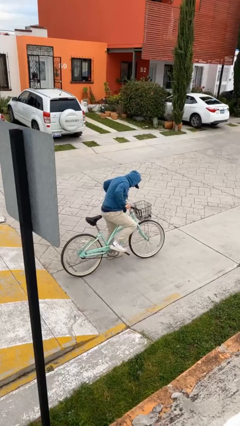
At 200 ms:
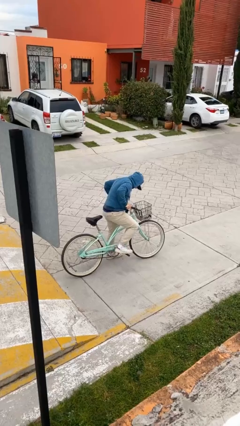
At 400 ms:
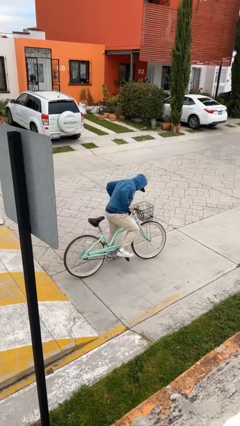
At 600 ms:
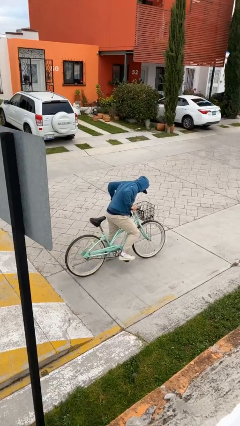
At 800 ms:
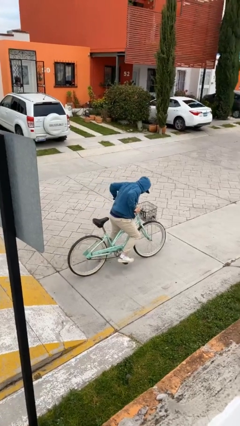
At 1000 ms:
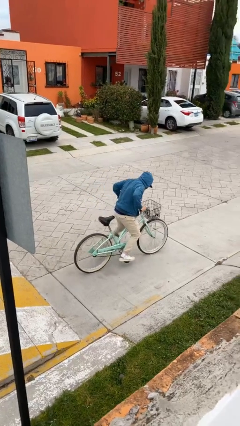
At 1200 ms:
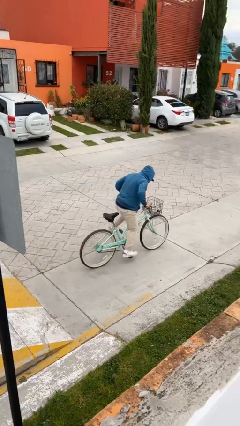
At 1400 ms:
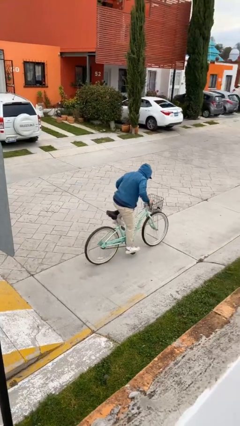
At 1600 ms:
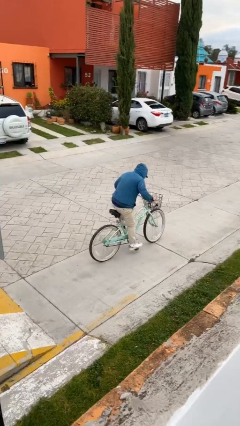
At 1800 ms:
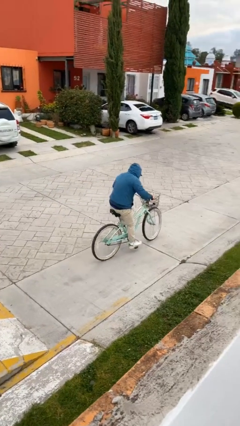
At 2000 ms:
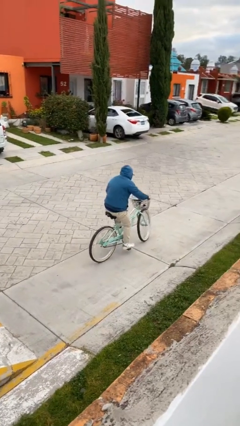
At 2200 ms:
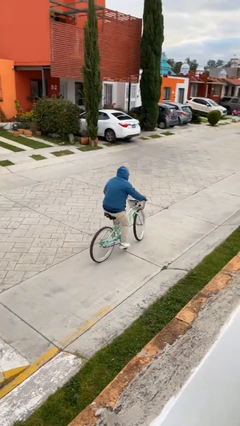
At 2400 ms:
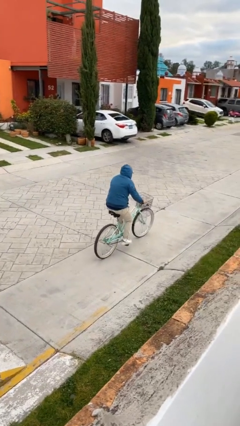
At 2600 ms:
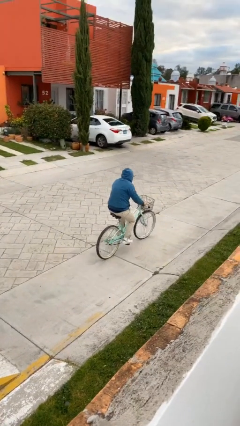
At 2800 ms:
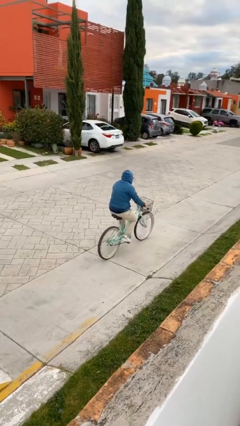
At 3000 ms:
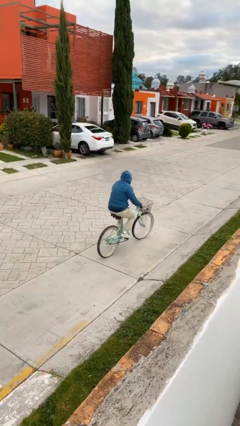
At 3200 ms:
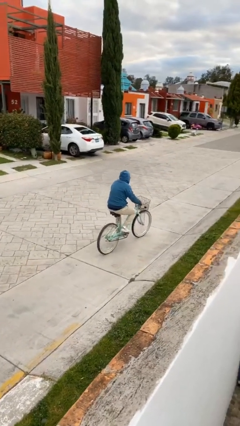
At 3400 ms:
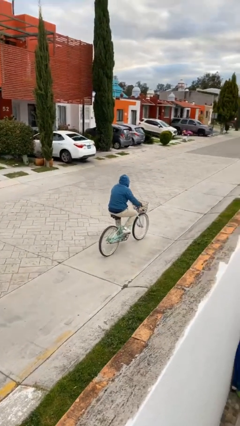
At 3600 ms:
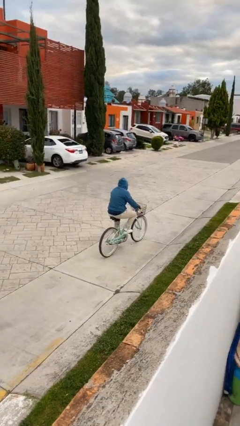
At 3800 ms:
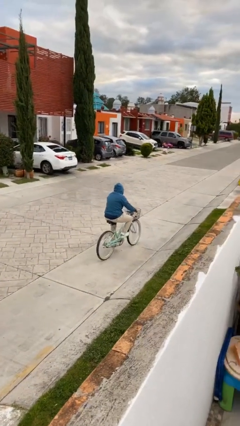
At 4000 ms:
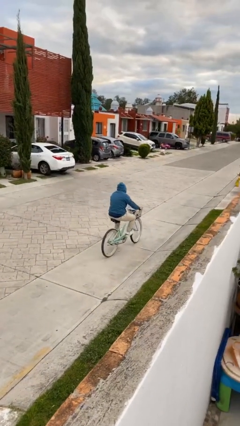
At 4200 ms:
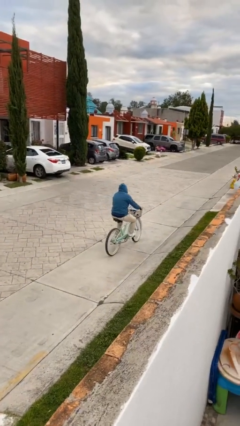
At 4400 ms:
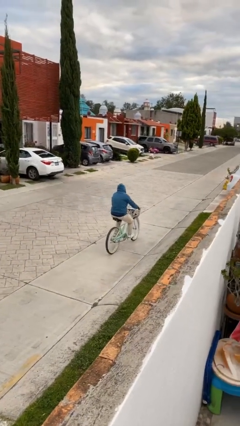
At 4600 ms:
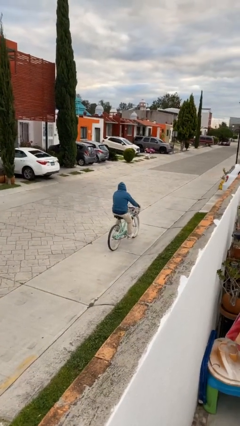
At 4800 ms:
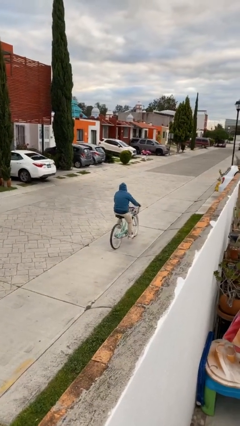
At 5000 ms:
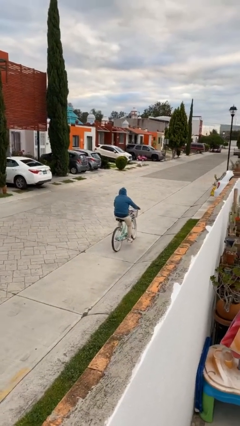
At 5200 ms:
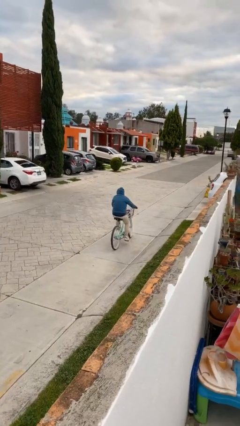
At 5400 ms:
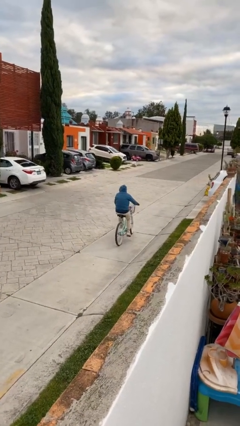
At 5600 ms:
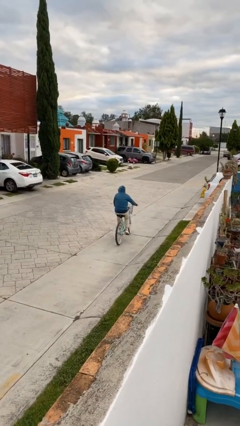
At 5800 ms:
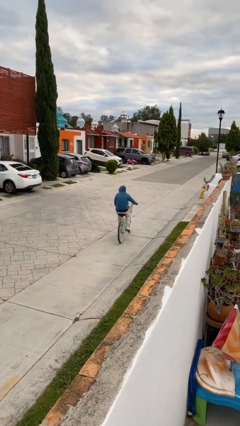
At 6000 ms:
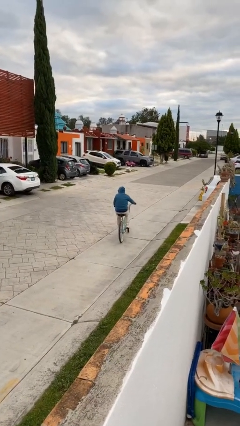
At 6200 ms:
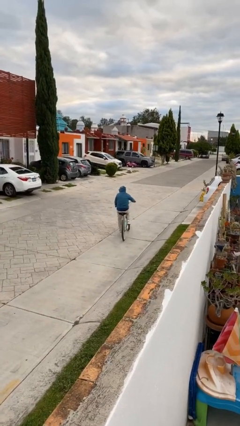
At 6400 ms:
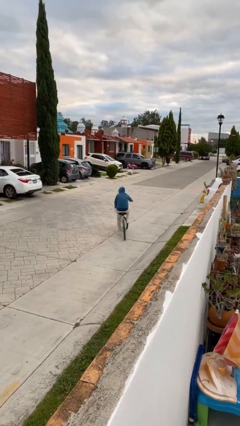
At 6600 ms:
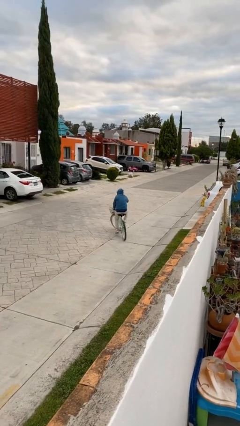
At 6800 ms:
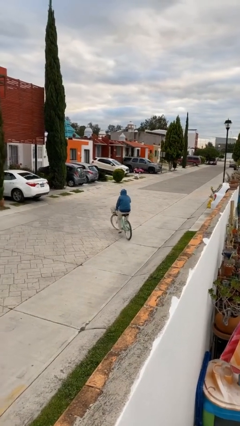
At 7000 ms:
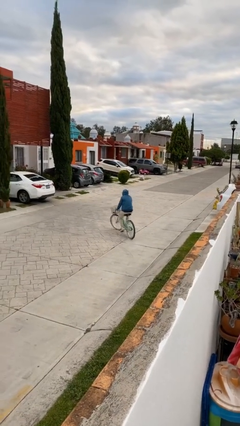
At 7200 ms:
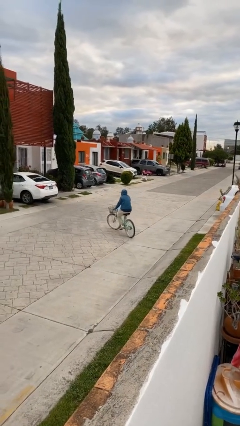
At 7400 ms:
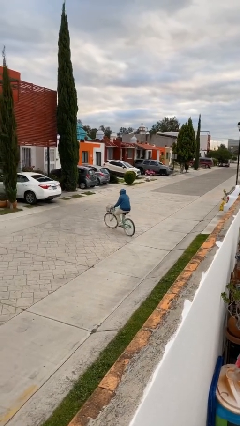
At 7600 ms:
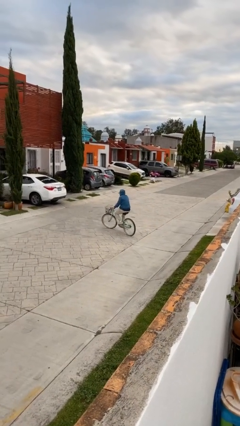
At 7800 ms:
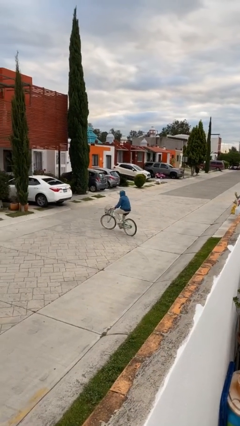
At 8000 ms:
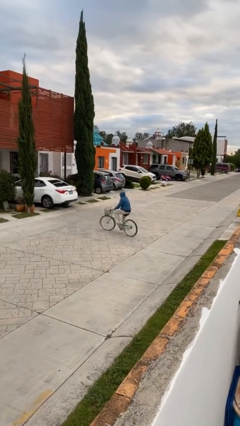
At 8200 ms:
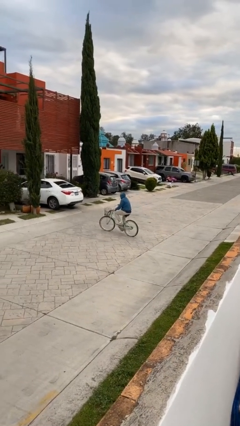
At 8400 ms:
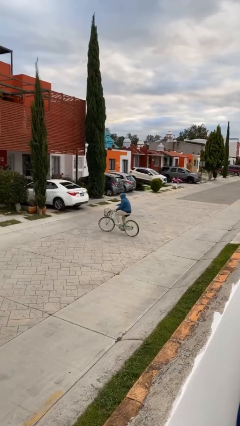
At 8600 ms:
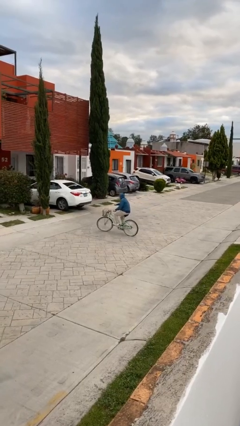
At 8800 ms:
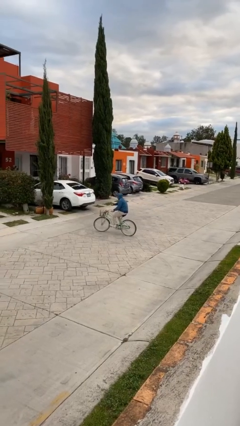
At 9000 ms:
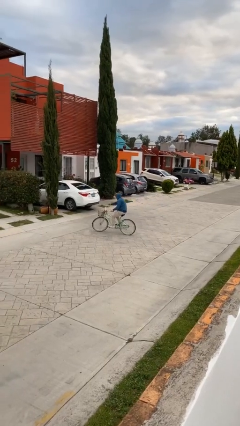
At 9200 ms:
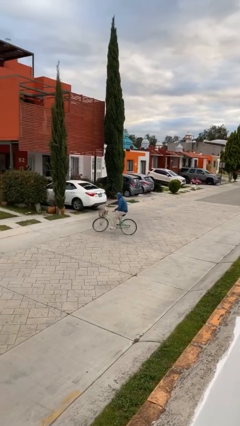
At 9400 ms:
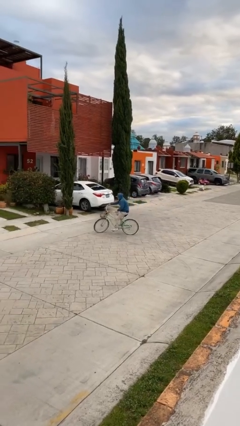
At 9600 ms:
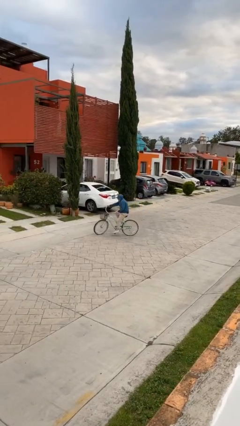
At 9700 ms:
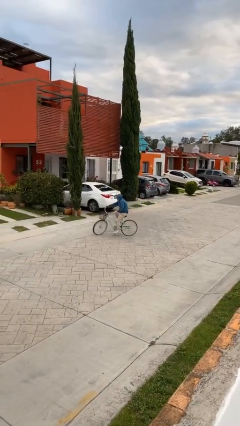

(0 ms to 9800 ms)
person rides bicycle

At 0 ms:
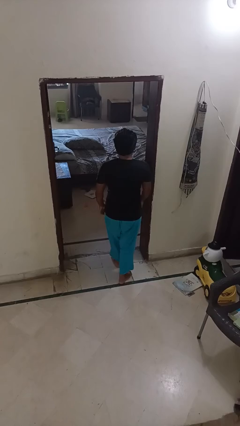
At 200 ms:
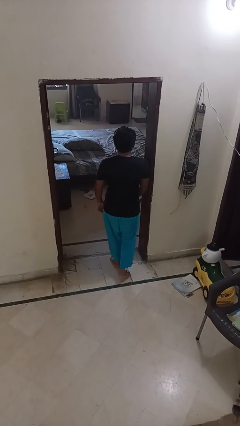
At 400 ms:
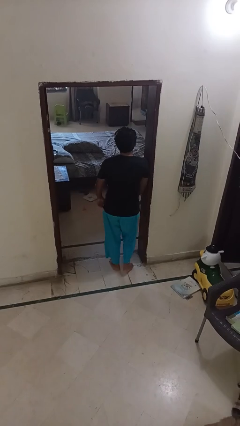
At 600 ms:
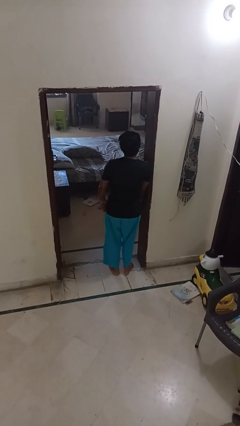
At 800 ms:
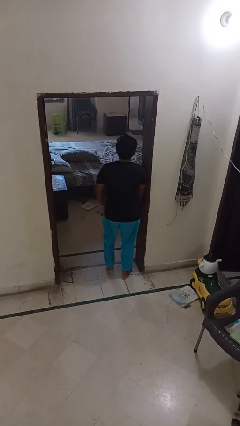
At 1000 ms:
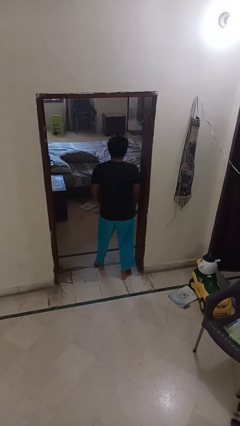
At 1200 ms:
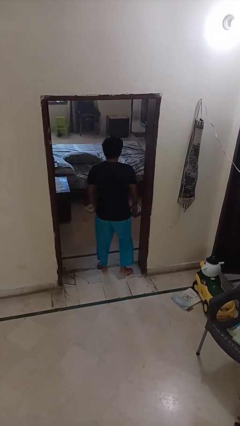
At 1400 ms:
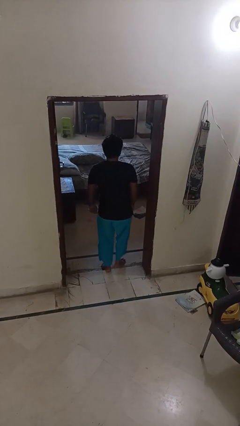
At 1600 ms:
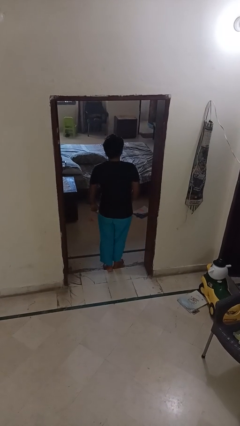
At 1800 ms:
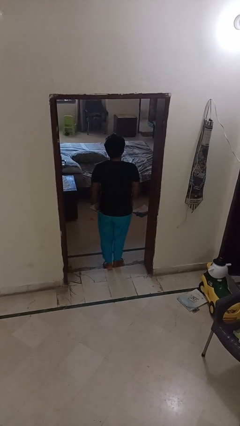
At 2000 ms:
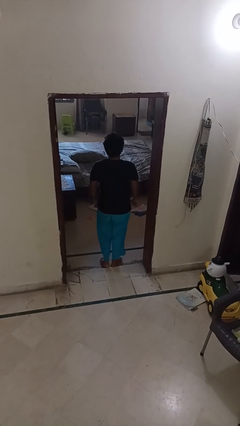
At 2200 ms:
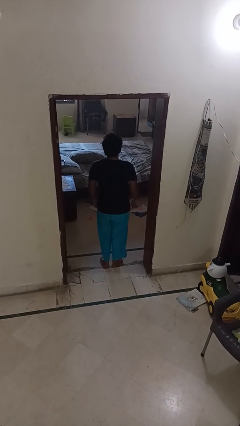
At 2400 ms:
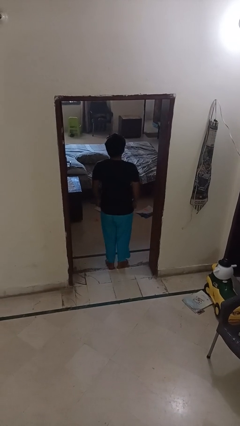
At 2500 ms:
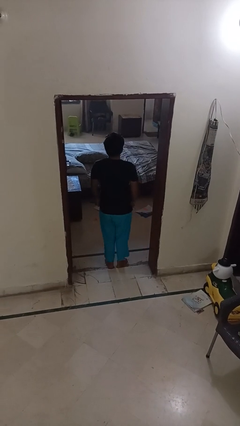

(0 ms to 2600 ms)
person bumps into wall

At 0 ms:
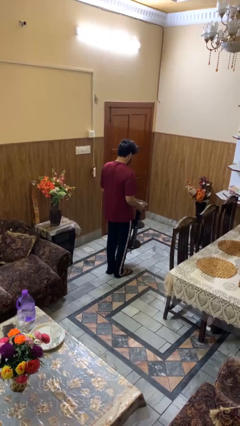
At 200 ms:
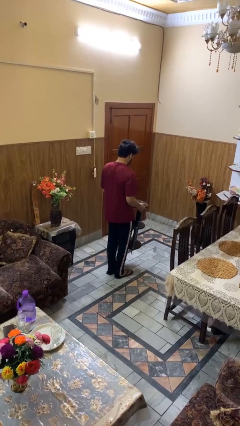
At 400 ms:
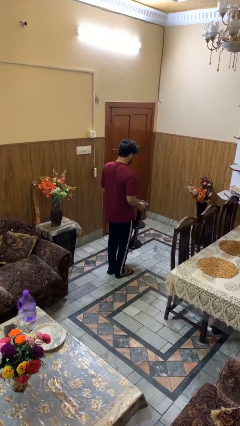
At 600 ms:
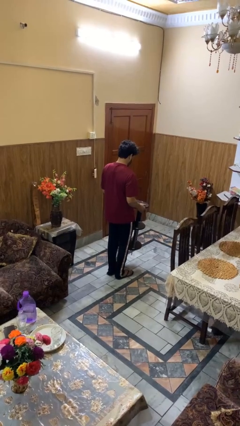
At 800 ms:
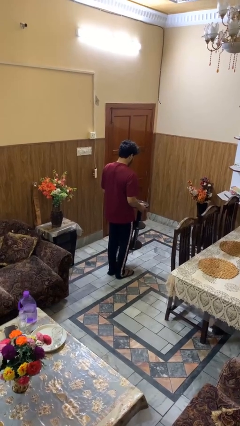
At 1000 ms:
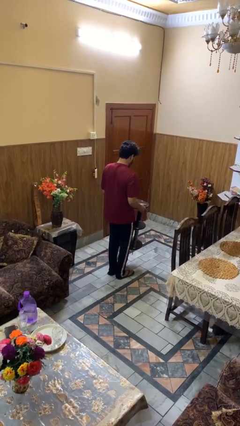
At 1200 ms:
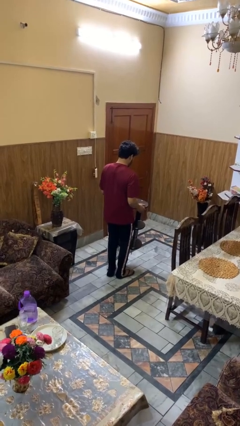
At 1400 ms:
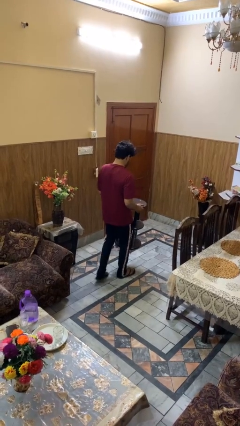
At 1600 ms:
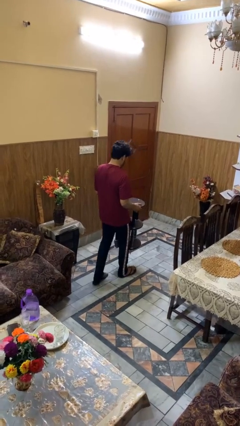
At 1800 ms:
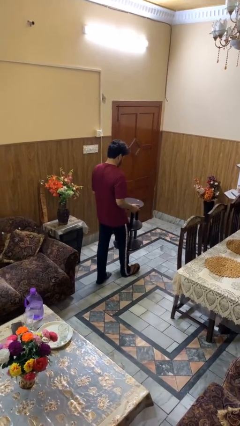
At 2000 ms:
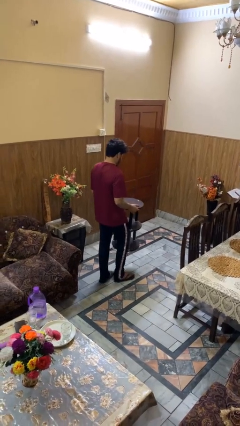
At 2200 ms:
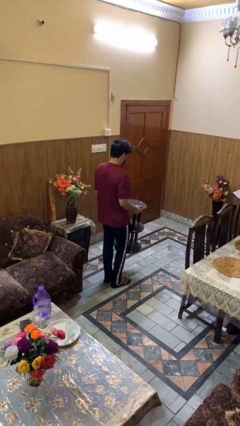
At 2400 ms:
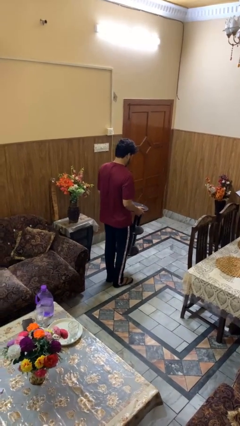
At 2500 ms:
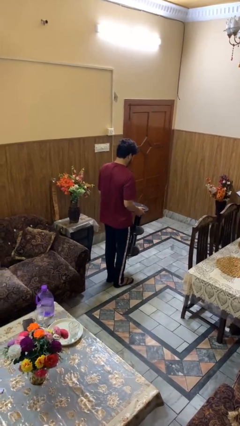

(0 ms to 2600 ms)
person carries furniture

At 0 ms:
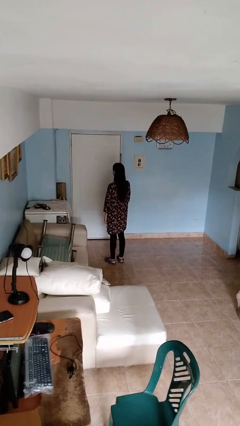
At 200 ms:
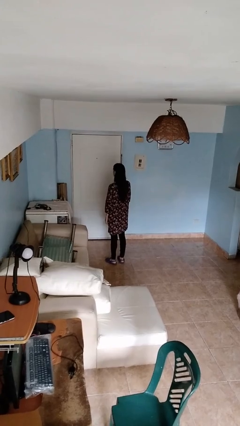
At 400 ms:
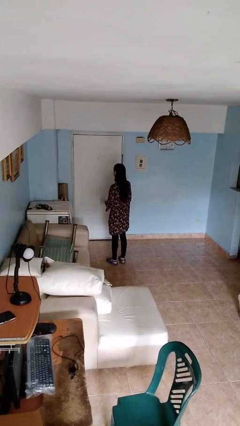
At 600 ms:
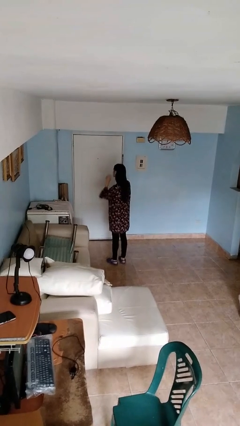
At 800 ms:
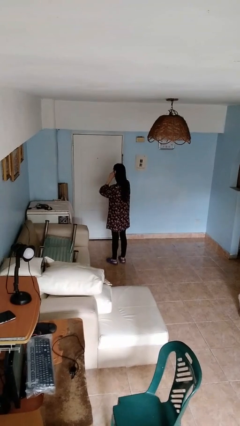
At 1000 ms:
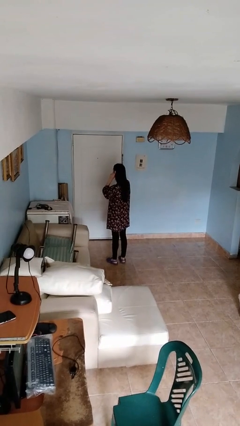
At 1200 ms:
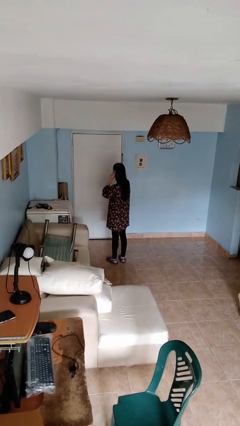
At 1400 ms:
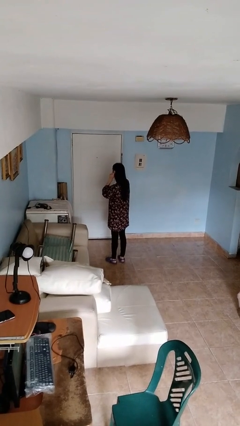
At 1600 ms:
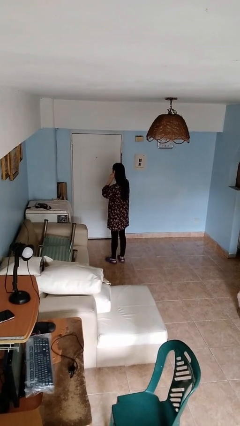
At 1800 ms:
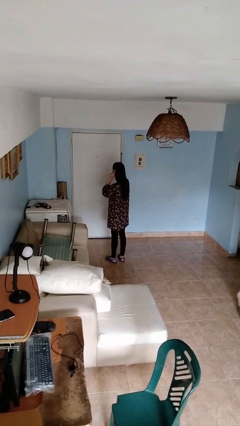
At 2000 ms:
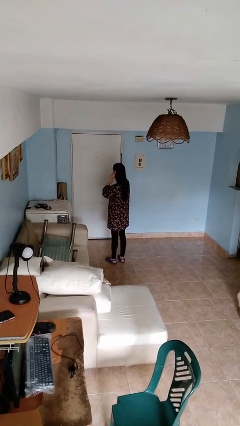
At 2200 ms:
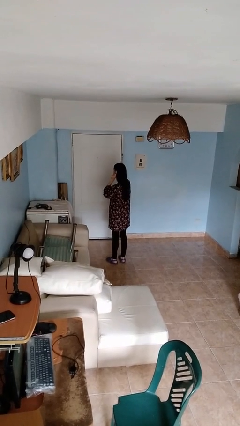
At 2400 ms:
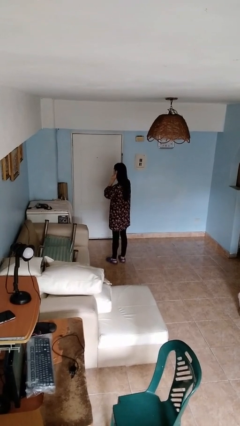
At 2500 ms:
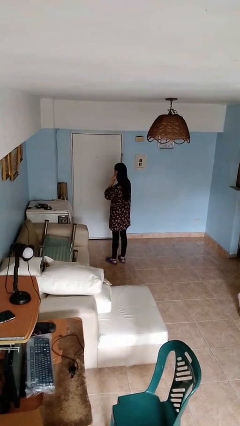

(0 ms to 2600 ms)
person touches earlobe
